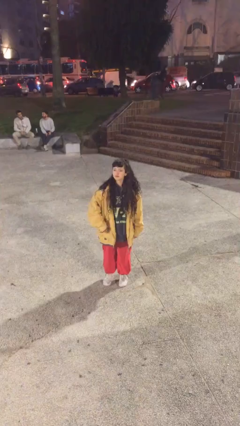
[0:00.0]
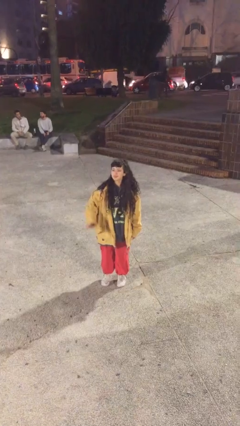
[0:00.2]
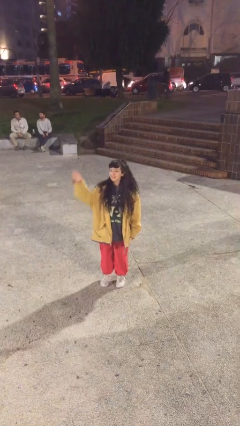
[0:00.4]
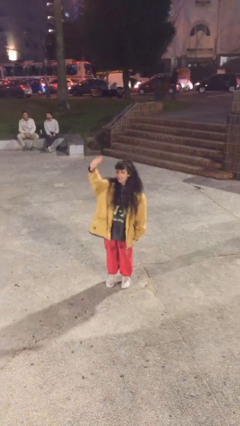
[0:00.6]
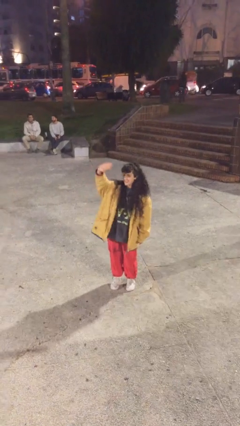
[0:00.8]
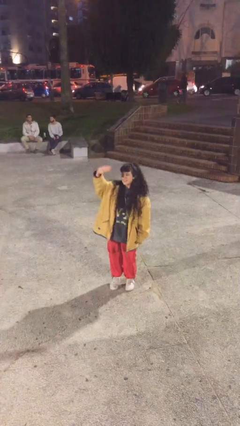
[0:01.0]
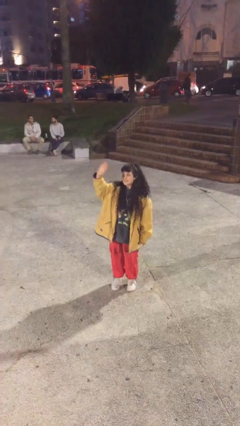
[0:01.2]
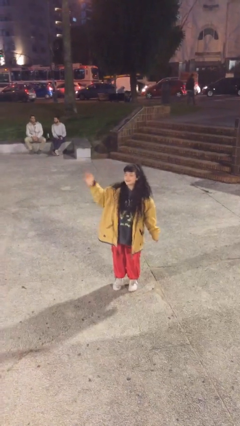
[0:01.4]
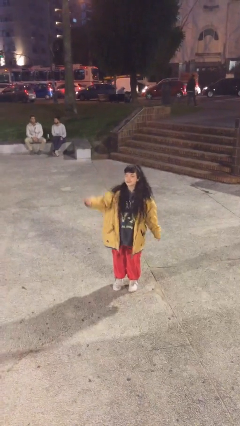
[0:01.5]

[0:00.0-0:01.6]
person waves at person

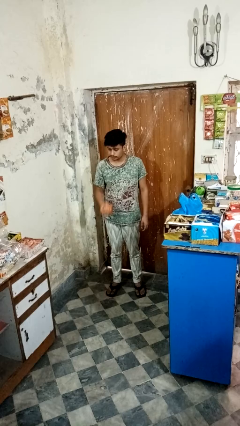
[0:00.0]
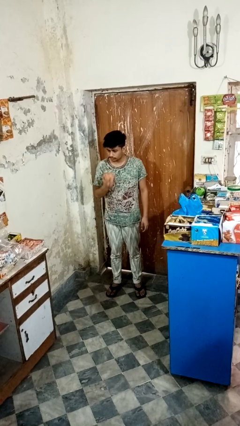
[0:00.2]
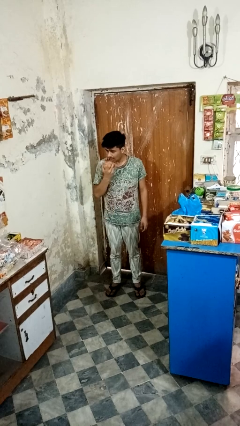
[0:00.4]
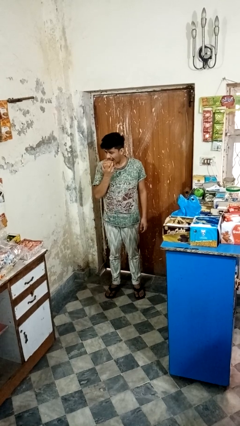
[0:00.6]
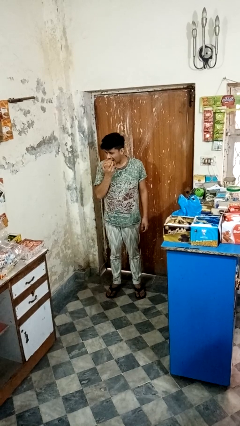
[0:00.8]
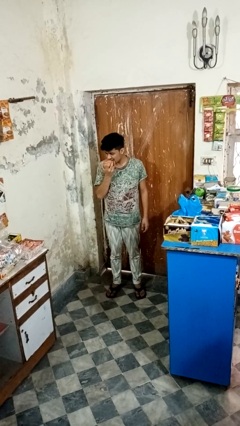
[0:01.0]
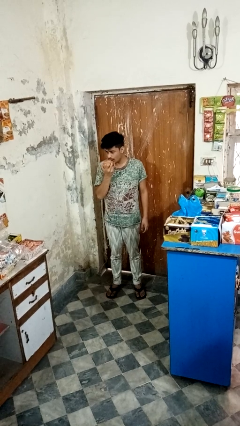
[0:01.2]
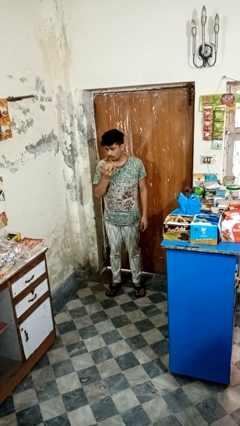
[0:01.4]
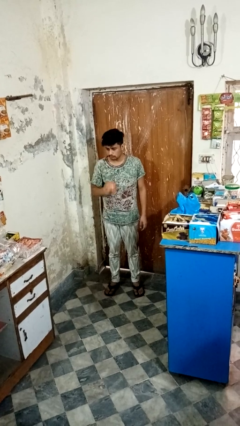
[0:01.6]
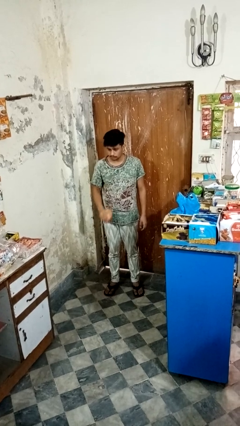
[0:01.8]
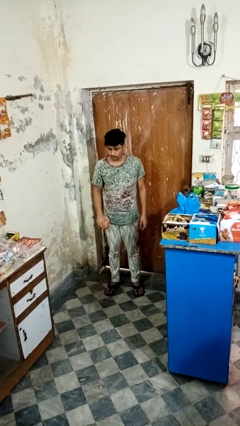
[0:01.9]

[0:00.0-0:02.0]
person eats apple

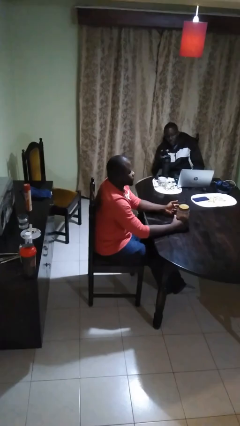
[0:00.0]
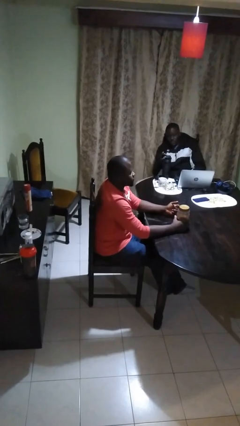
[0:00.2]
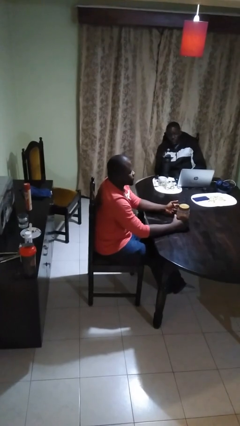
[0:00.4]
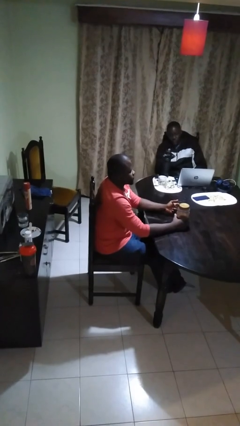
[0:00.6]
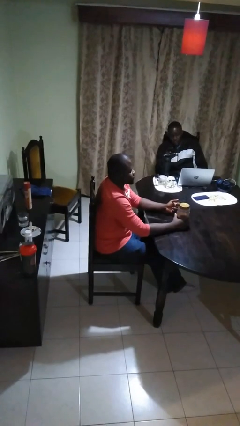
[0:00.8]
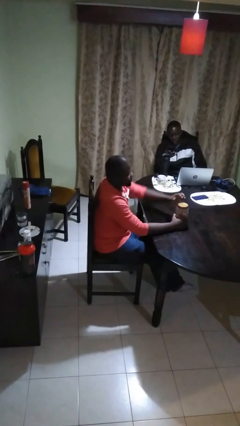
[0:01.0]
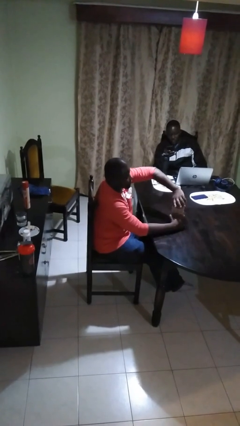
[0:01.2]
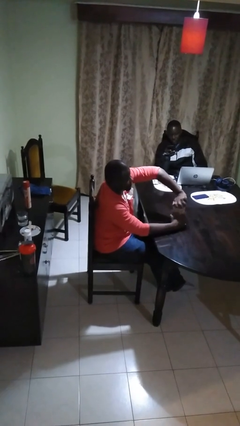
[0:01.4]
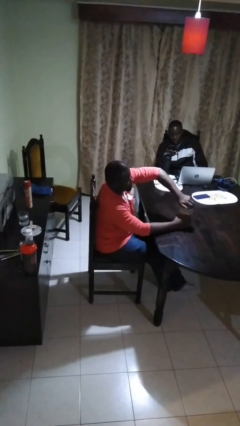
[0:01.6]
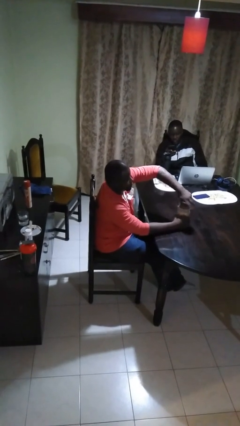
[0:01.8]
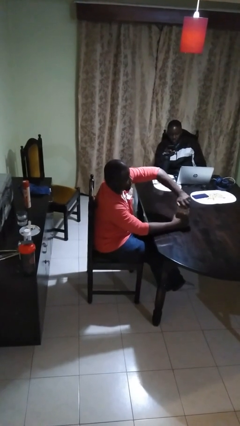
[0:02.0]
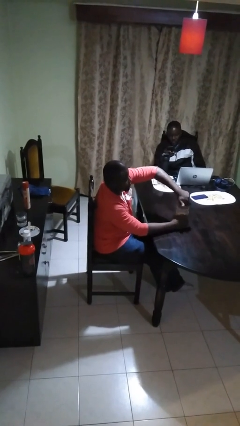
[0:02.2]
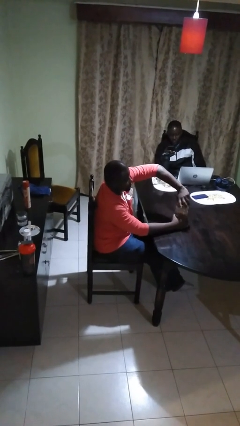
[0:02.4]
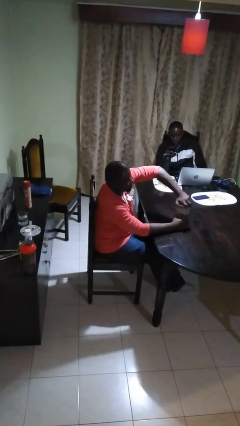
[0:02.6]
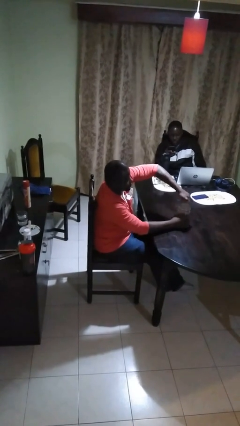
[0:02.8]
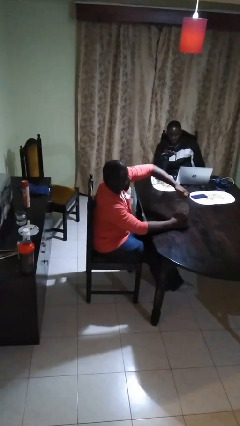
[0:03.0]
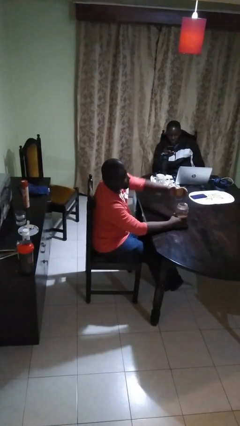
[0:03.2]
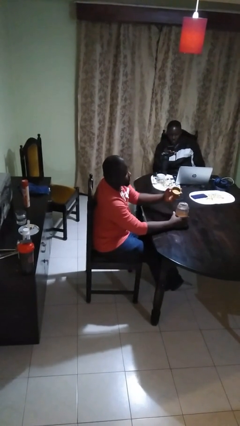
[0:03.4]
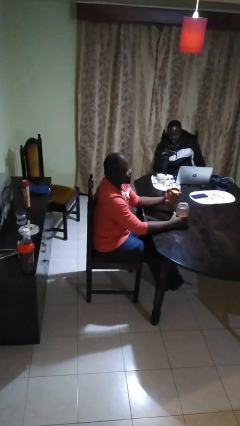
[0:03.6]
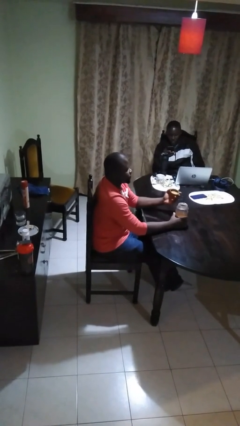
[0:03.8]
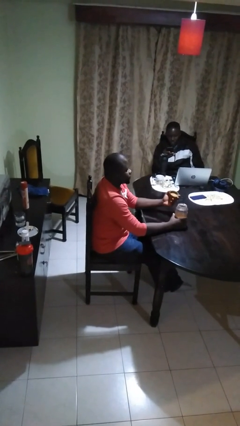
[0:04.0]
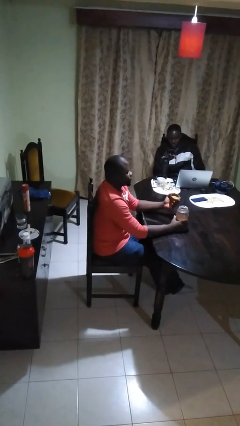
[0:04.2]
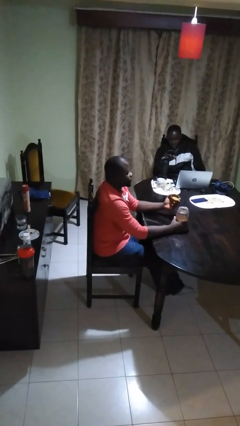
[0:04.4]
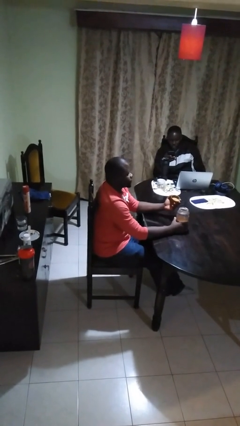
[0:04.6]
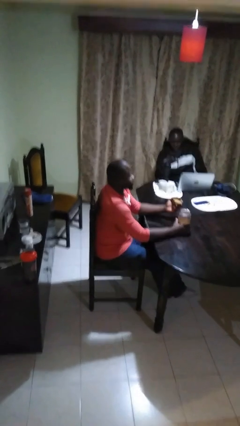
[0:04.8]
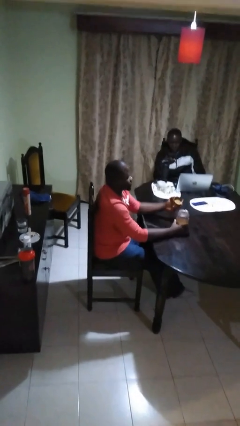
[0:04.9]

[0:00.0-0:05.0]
person opens jar

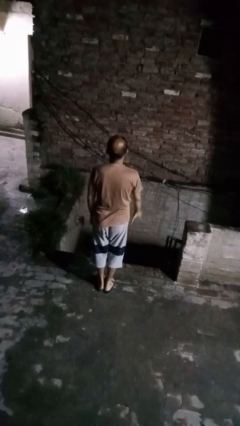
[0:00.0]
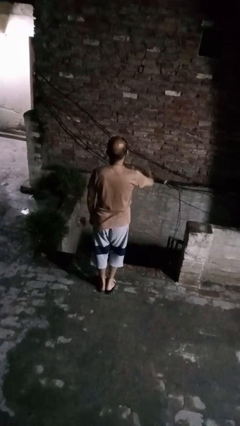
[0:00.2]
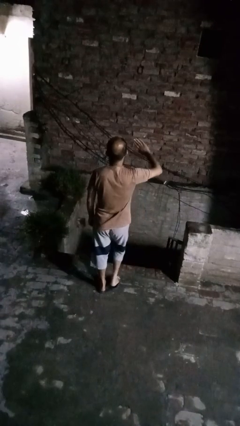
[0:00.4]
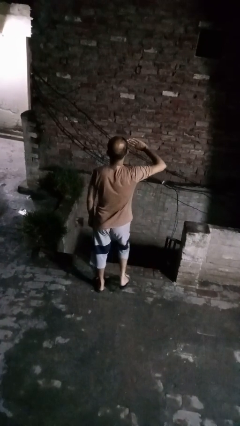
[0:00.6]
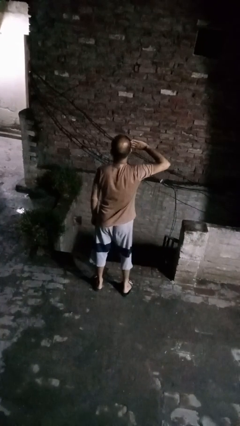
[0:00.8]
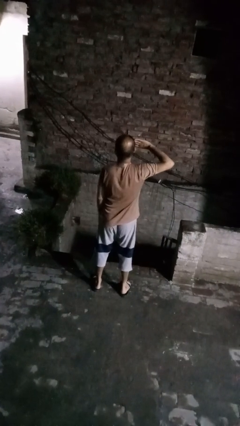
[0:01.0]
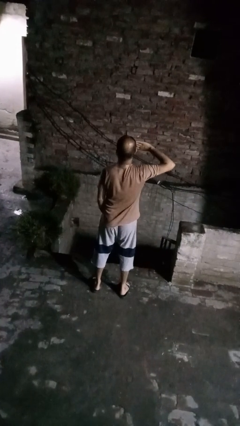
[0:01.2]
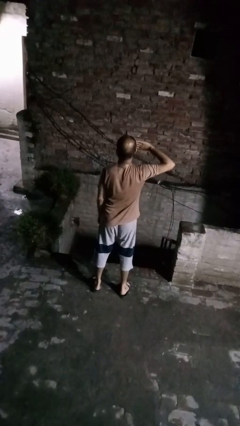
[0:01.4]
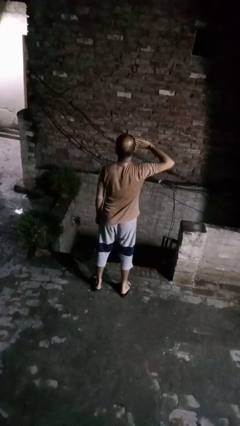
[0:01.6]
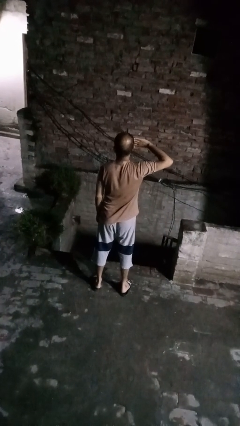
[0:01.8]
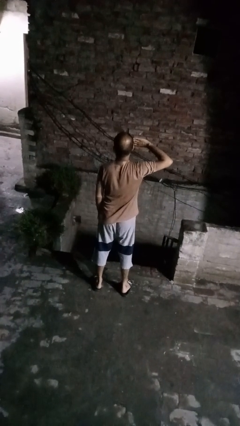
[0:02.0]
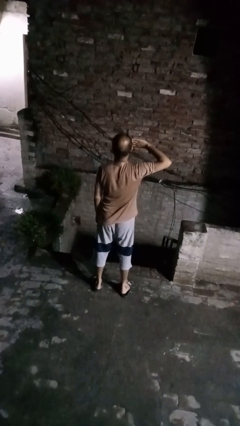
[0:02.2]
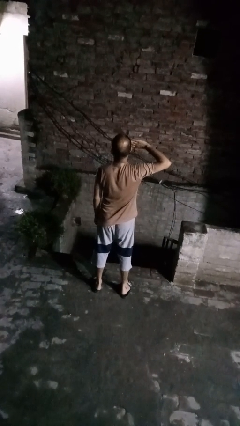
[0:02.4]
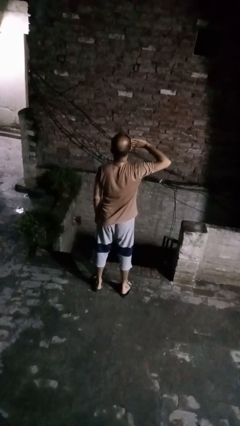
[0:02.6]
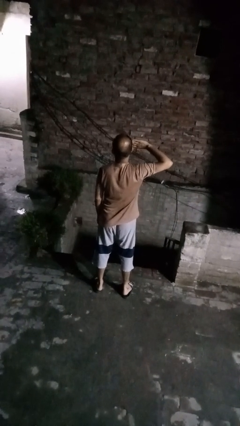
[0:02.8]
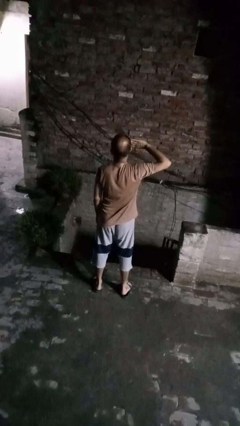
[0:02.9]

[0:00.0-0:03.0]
person salutes

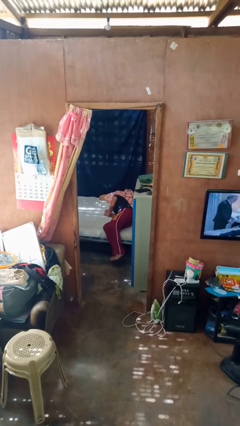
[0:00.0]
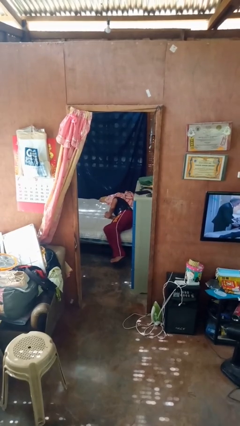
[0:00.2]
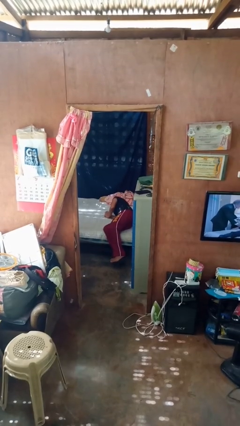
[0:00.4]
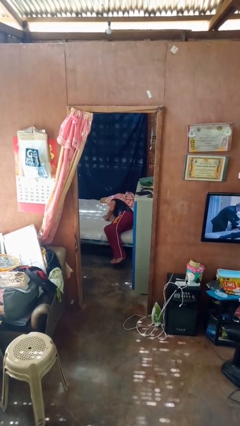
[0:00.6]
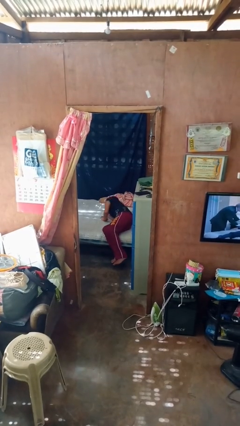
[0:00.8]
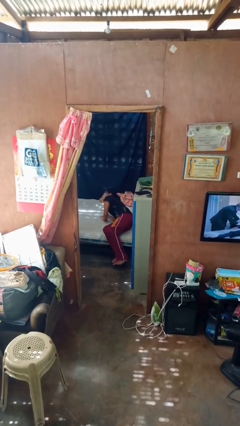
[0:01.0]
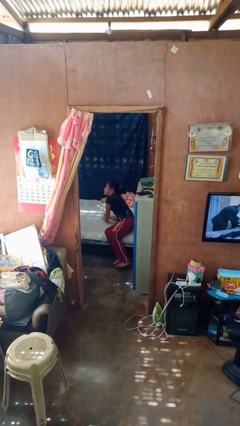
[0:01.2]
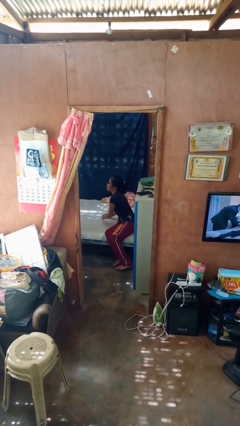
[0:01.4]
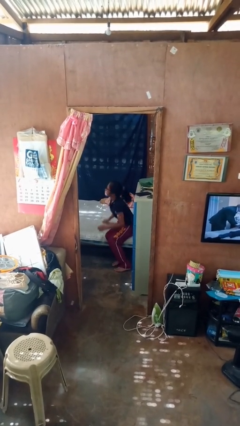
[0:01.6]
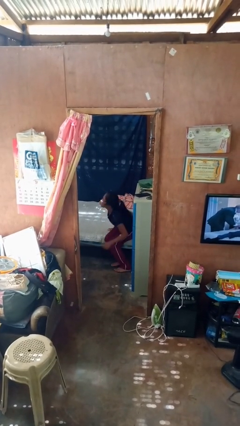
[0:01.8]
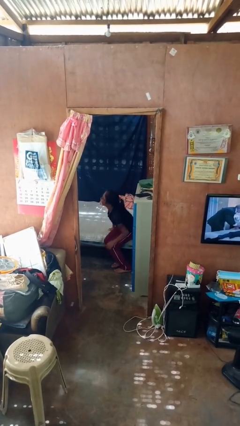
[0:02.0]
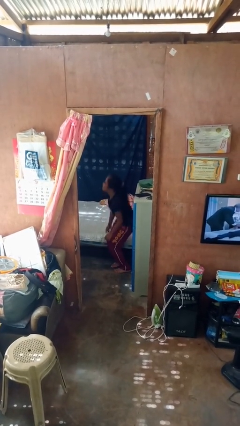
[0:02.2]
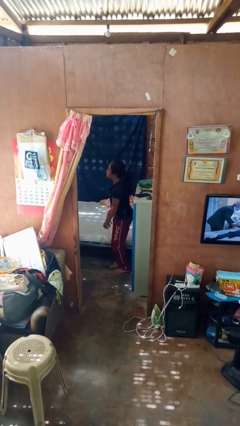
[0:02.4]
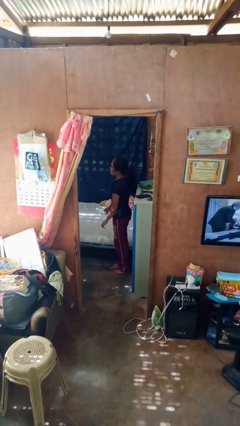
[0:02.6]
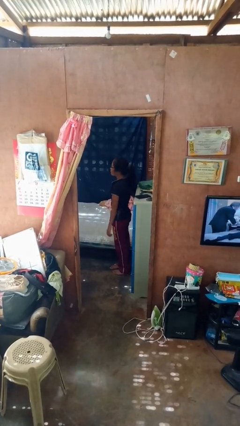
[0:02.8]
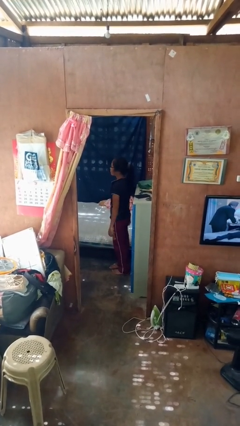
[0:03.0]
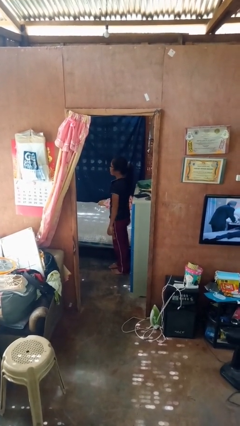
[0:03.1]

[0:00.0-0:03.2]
person stands up

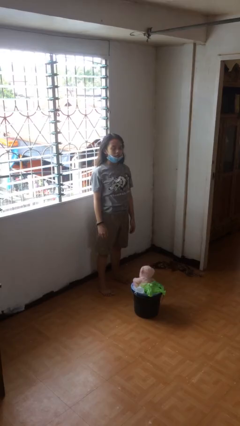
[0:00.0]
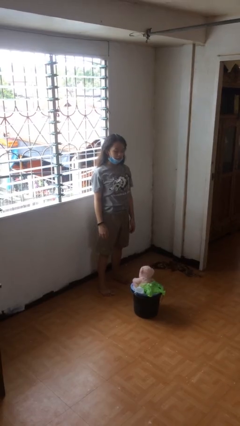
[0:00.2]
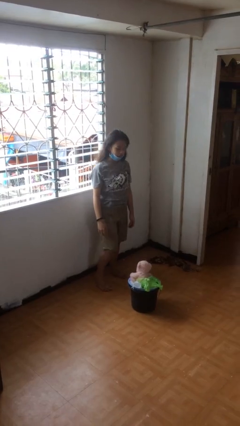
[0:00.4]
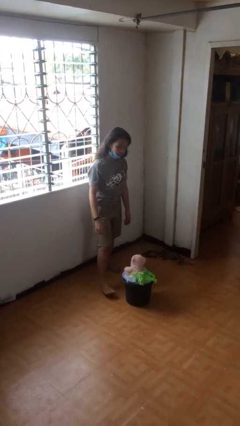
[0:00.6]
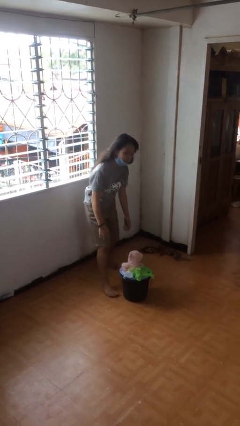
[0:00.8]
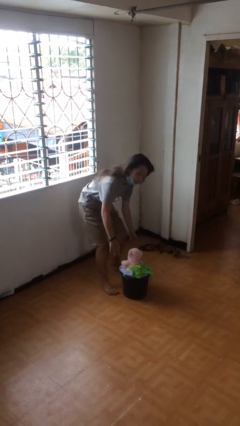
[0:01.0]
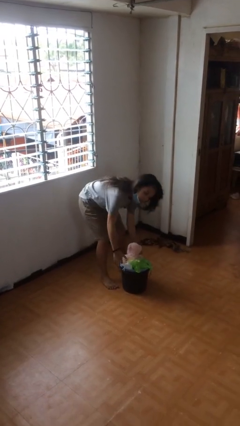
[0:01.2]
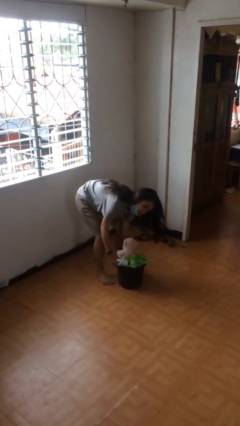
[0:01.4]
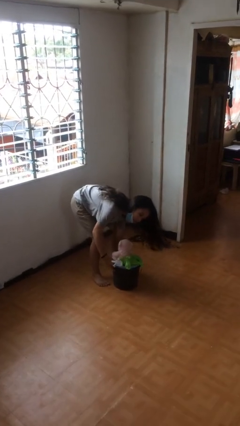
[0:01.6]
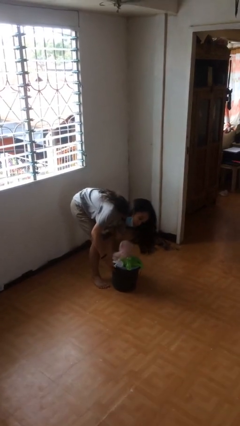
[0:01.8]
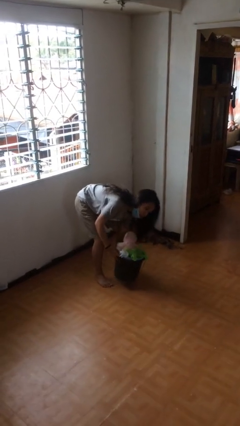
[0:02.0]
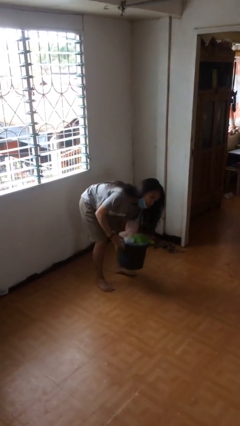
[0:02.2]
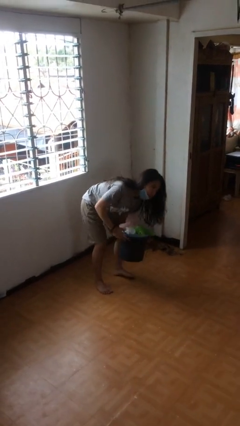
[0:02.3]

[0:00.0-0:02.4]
person picks up object from floor

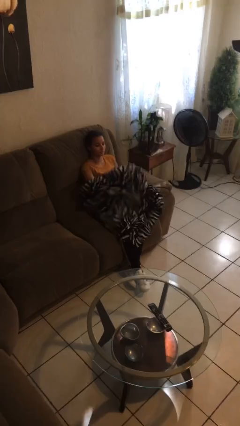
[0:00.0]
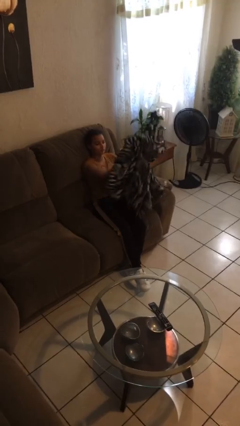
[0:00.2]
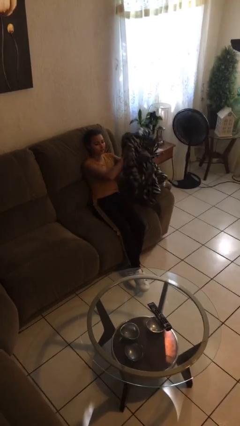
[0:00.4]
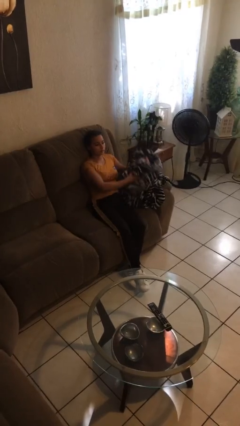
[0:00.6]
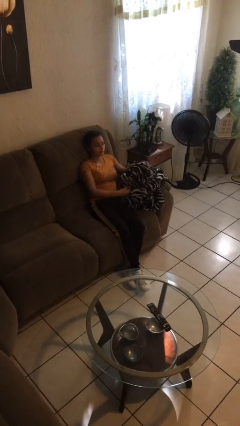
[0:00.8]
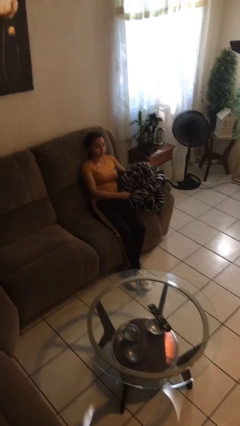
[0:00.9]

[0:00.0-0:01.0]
person uncovers with blanket
